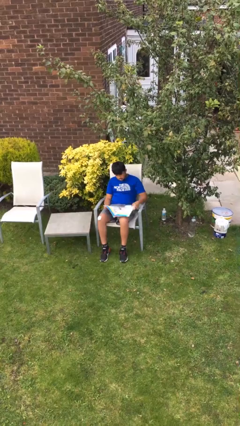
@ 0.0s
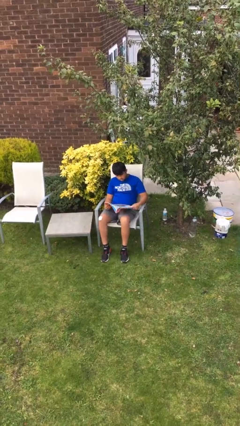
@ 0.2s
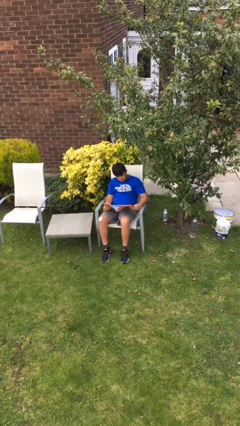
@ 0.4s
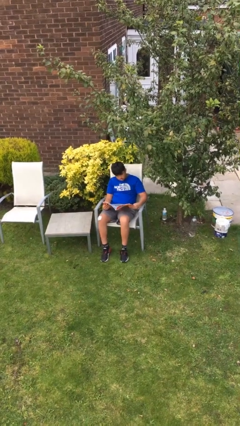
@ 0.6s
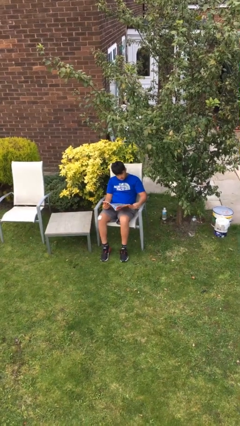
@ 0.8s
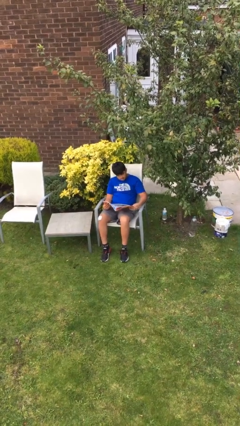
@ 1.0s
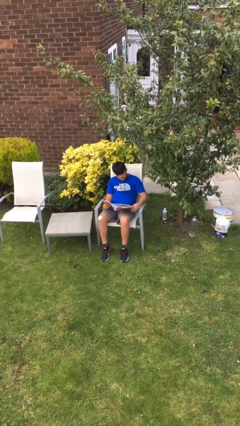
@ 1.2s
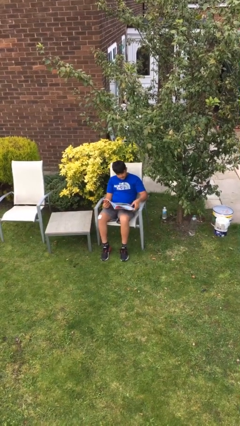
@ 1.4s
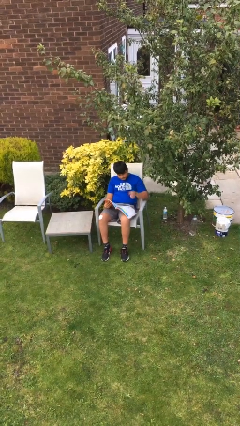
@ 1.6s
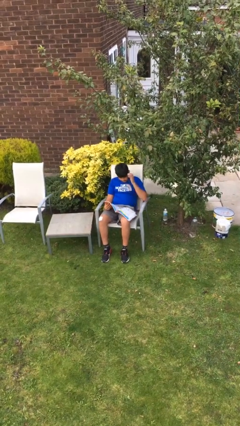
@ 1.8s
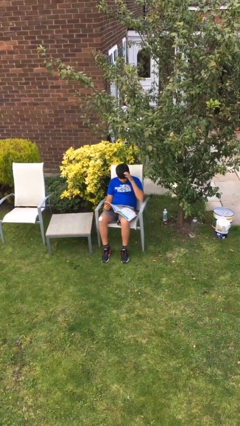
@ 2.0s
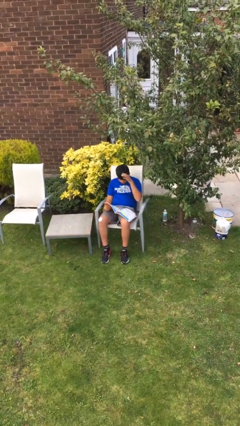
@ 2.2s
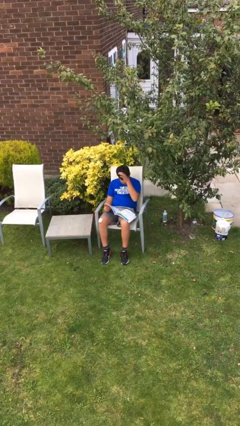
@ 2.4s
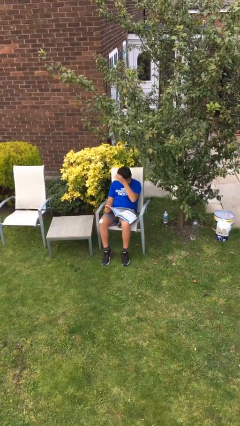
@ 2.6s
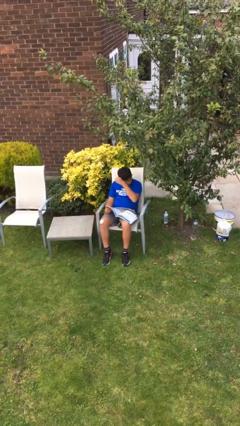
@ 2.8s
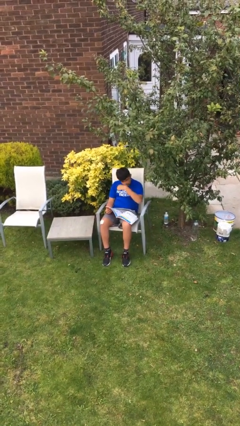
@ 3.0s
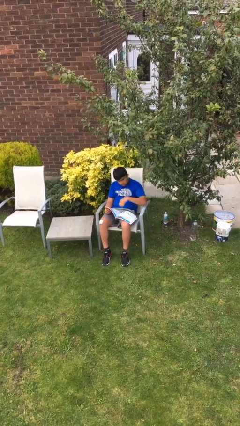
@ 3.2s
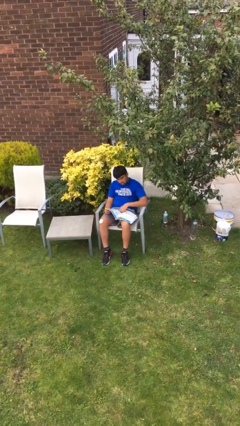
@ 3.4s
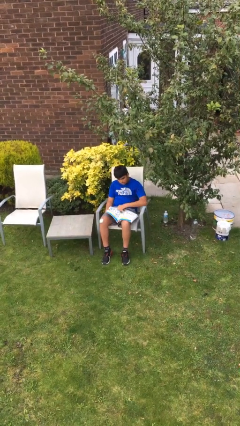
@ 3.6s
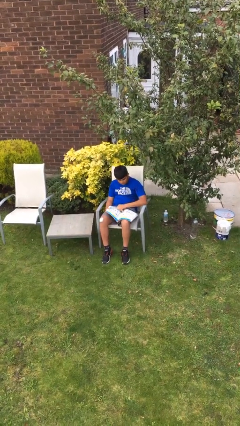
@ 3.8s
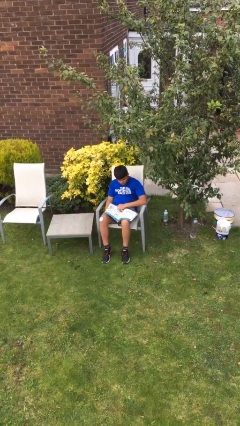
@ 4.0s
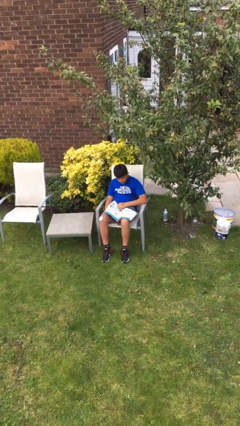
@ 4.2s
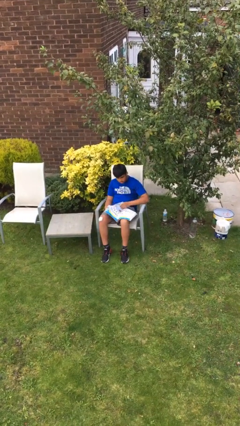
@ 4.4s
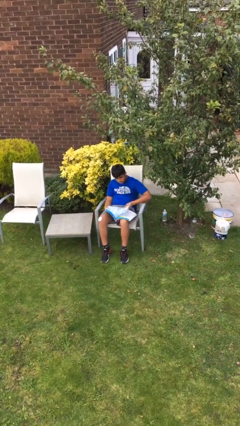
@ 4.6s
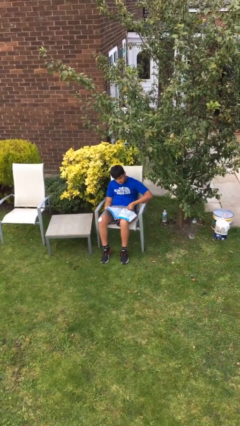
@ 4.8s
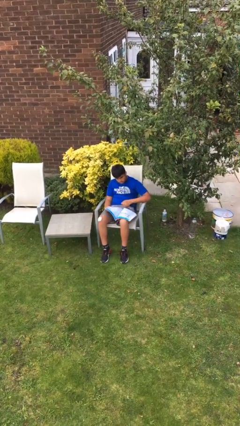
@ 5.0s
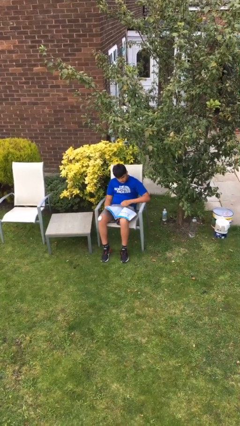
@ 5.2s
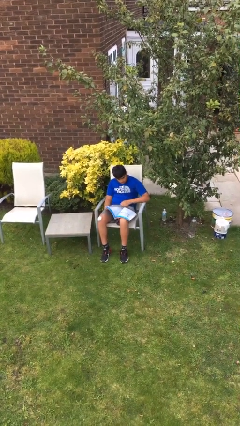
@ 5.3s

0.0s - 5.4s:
person reads document

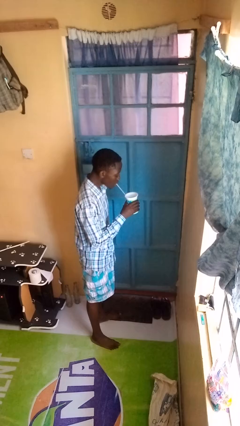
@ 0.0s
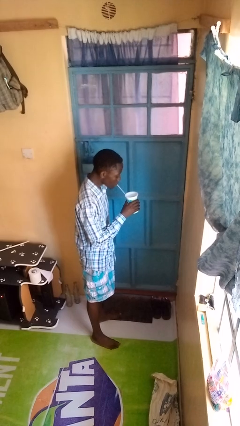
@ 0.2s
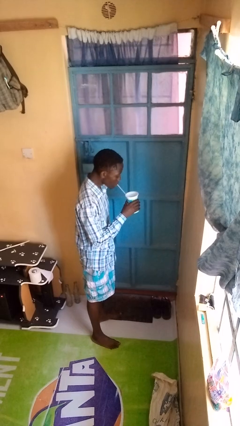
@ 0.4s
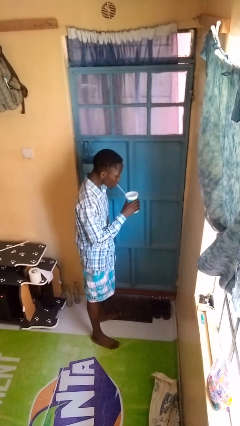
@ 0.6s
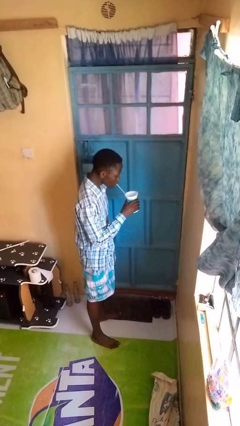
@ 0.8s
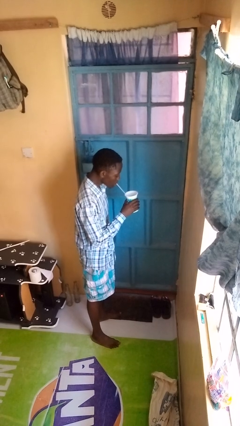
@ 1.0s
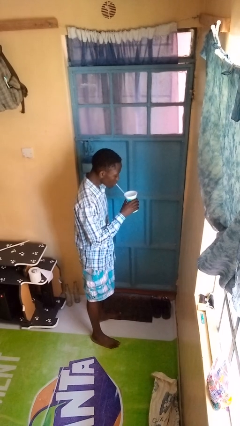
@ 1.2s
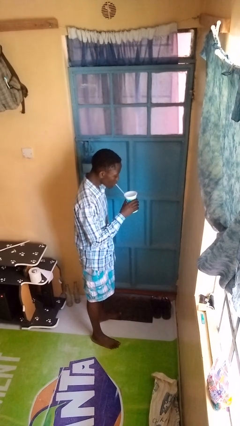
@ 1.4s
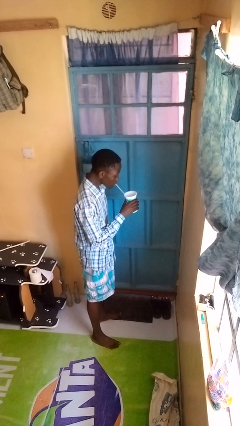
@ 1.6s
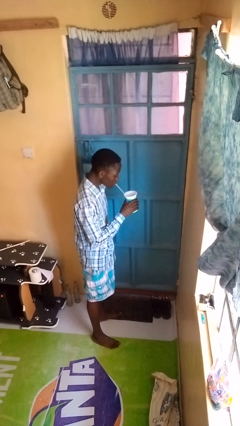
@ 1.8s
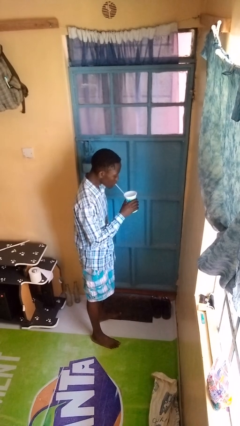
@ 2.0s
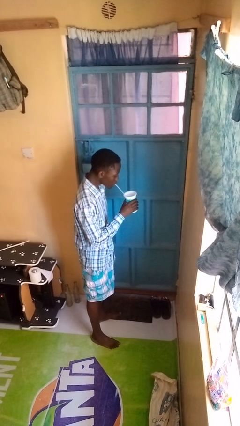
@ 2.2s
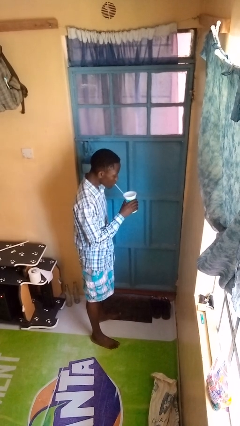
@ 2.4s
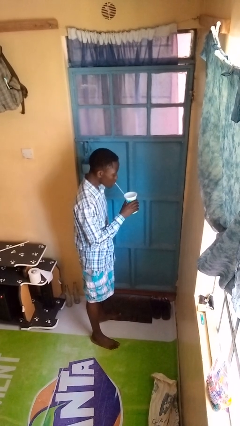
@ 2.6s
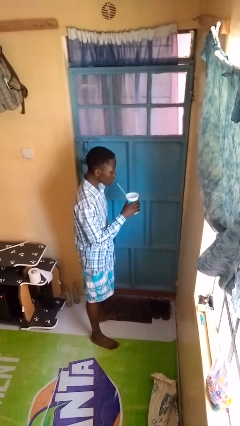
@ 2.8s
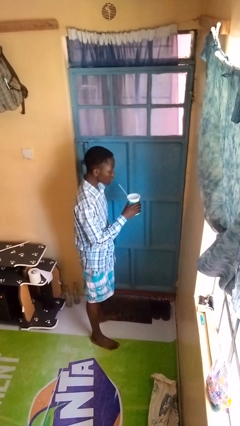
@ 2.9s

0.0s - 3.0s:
person drinks from straw

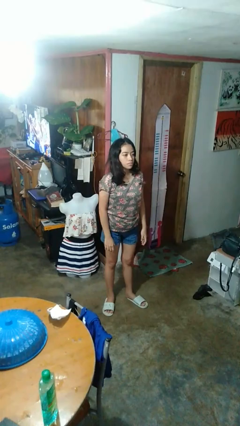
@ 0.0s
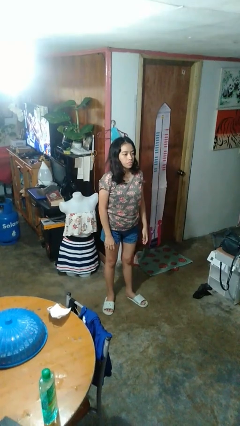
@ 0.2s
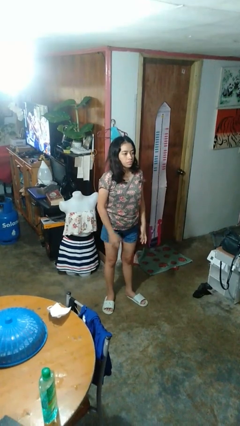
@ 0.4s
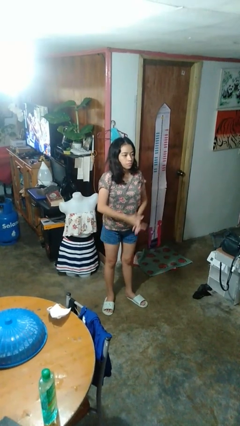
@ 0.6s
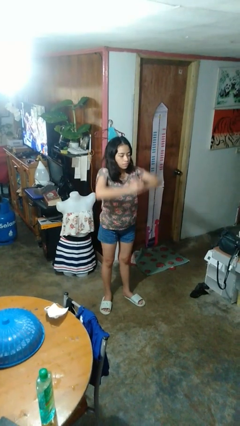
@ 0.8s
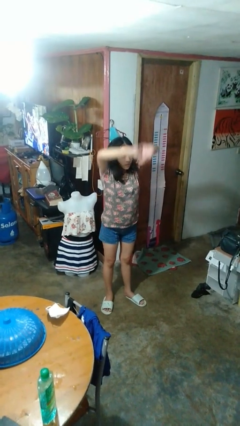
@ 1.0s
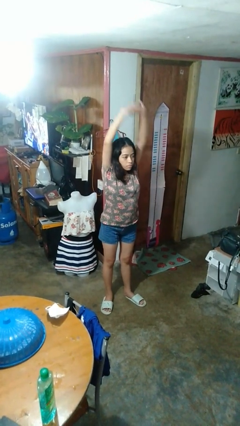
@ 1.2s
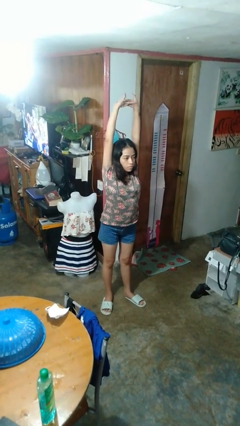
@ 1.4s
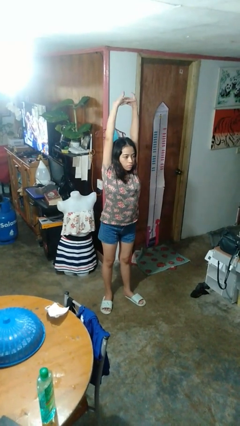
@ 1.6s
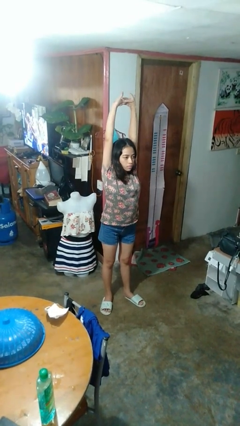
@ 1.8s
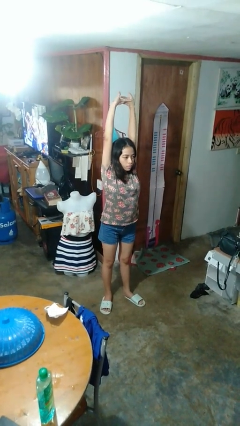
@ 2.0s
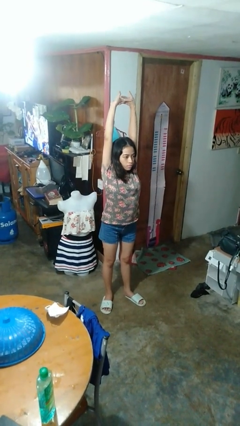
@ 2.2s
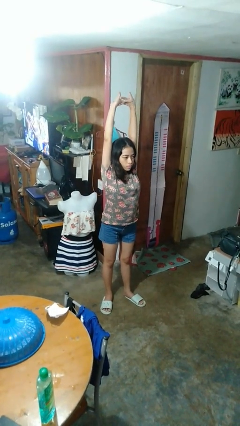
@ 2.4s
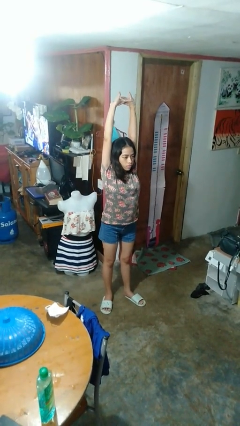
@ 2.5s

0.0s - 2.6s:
person stretches arms over head

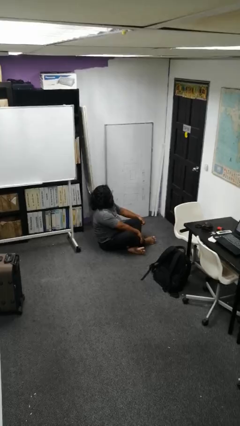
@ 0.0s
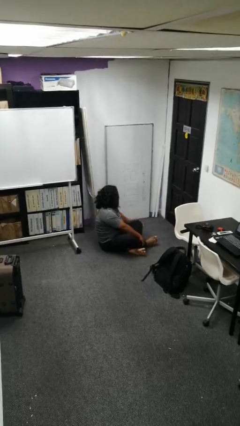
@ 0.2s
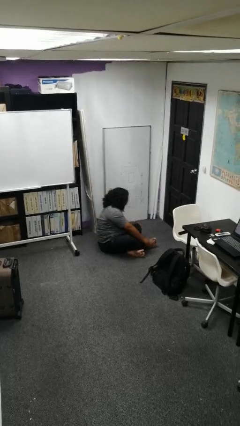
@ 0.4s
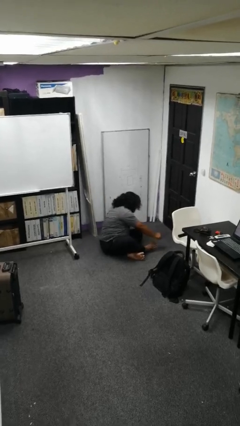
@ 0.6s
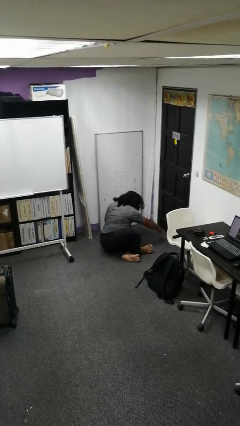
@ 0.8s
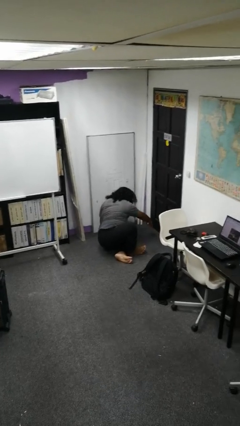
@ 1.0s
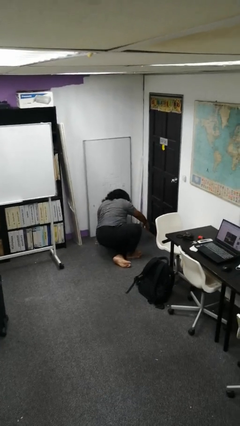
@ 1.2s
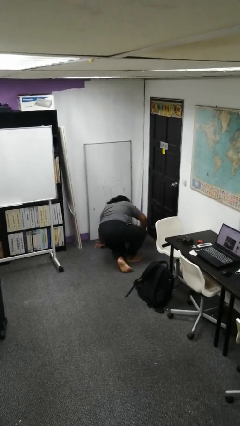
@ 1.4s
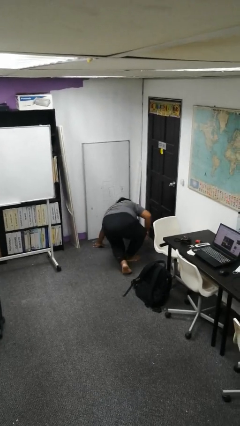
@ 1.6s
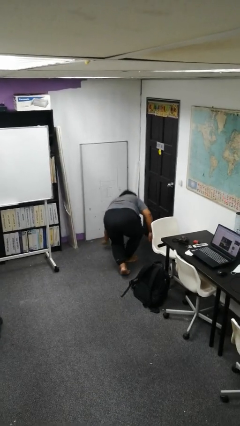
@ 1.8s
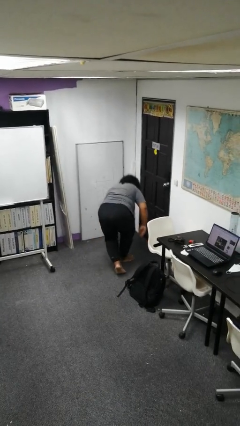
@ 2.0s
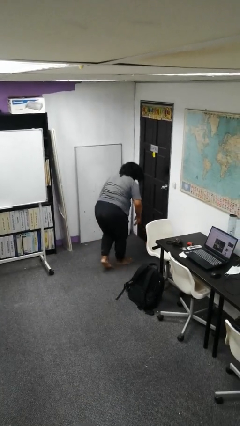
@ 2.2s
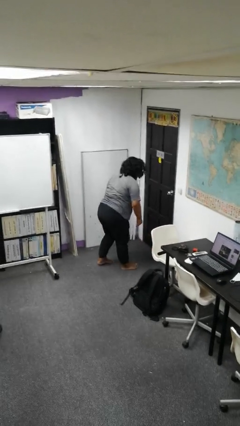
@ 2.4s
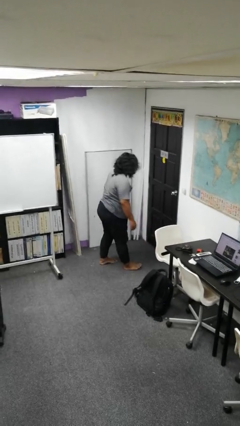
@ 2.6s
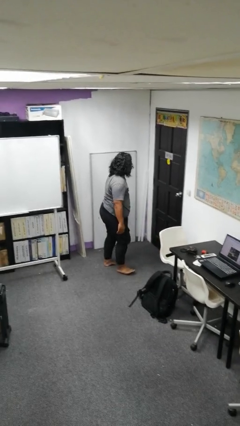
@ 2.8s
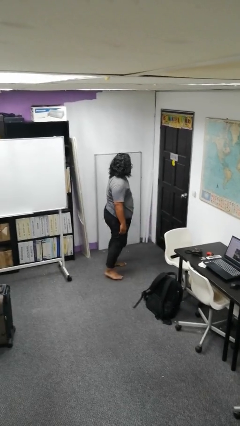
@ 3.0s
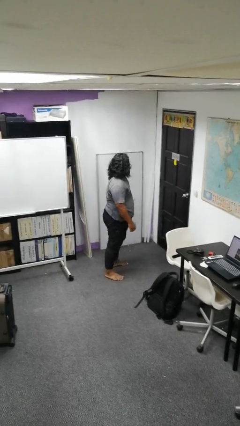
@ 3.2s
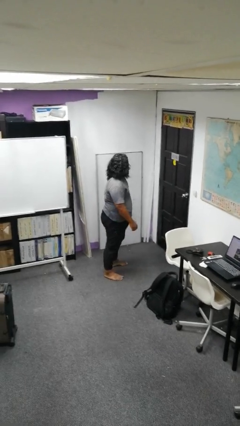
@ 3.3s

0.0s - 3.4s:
person stands up from floor

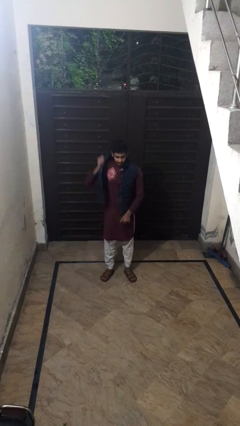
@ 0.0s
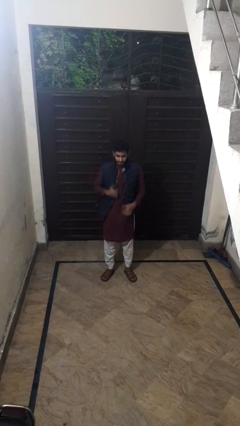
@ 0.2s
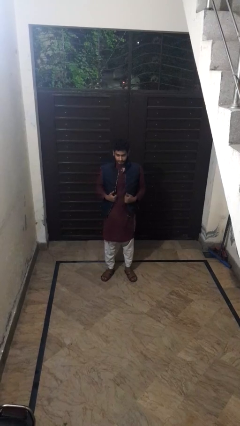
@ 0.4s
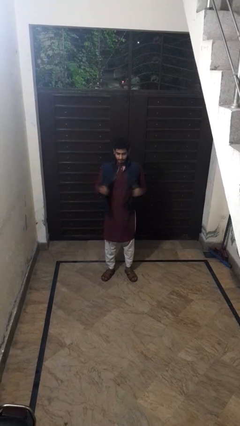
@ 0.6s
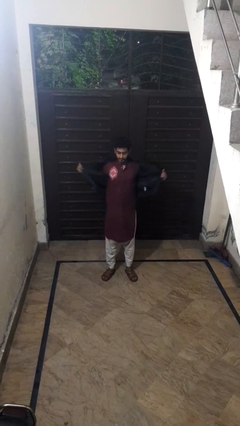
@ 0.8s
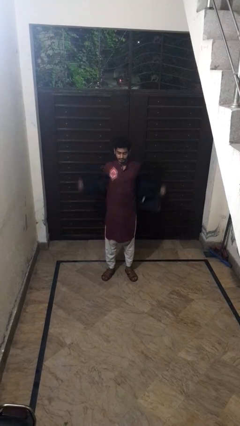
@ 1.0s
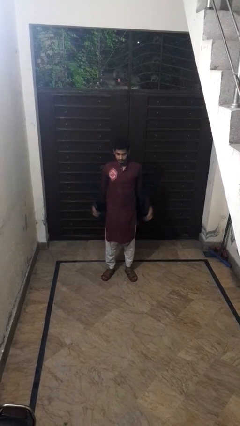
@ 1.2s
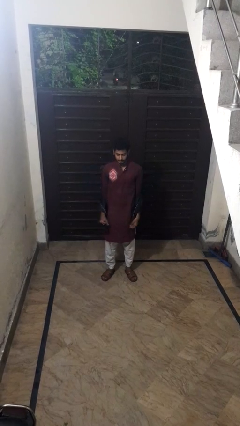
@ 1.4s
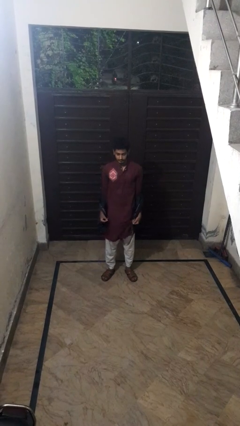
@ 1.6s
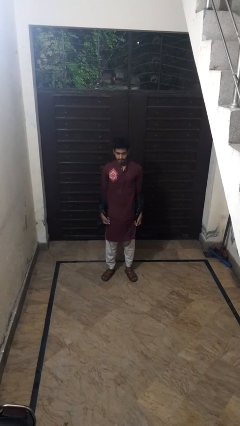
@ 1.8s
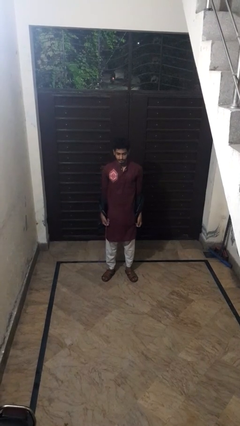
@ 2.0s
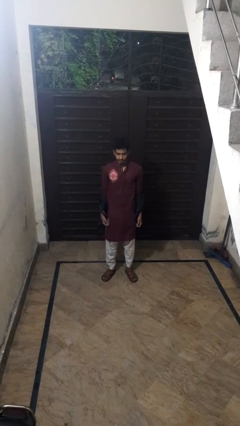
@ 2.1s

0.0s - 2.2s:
person takes off jacket

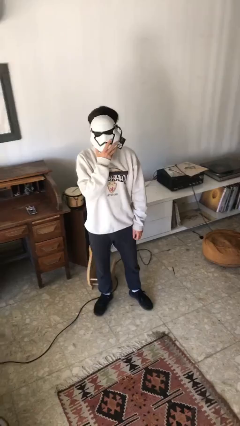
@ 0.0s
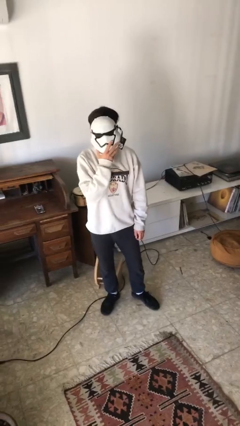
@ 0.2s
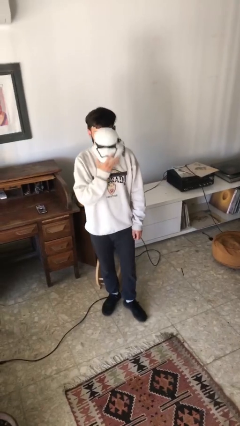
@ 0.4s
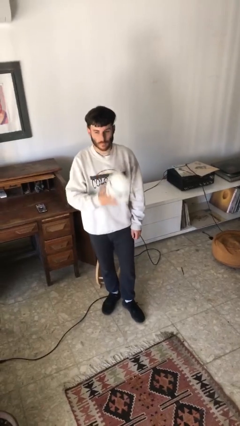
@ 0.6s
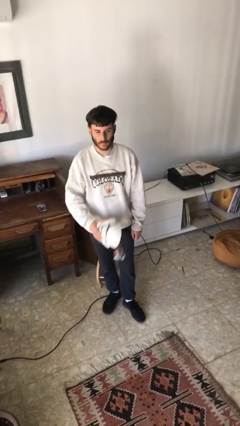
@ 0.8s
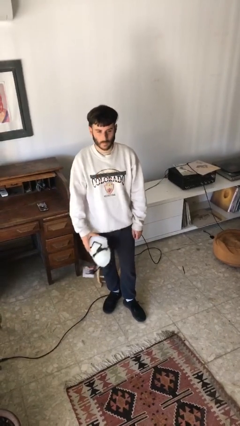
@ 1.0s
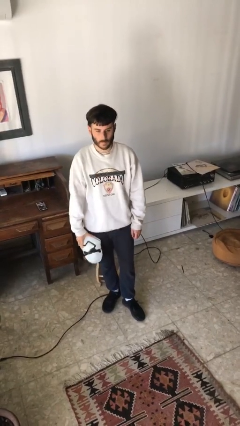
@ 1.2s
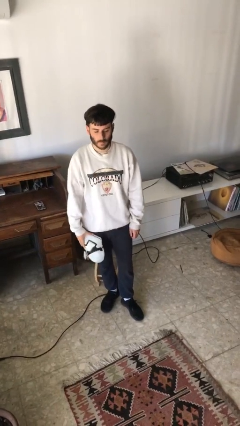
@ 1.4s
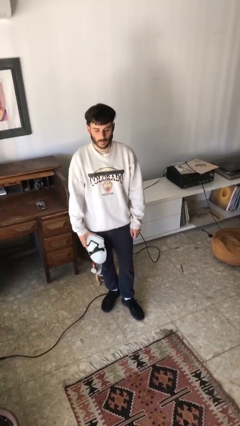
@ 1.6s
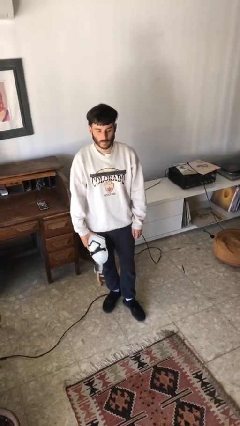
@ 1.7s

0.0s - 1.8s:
person takes off facemask
